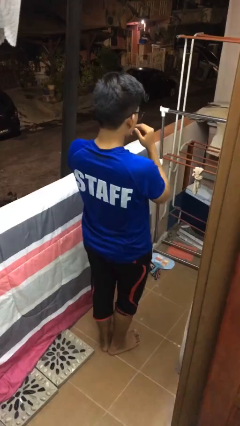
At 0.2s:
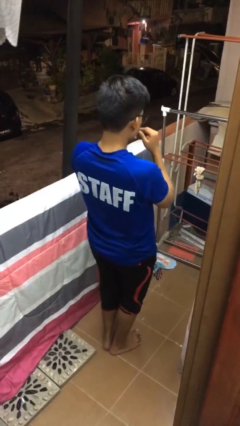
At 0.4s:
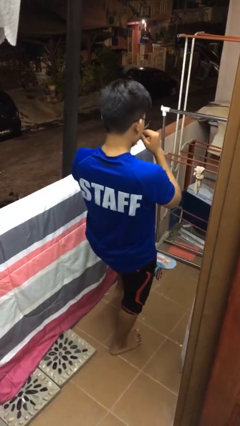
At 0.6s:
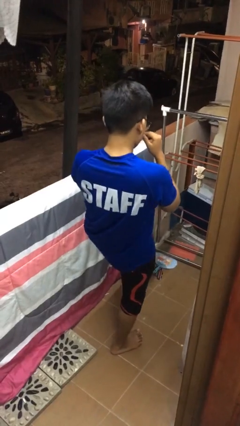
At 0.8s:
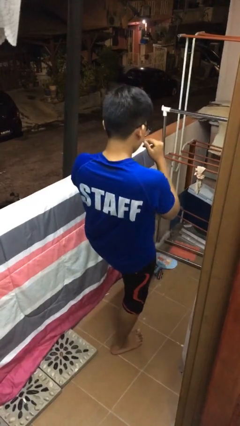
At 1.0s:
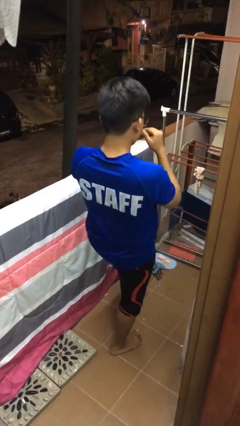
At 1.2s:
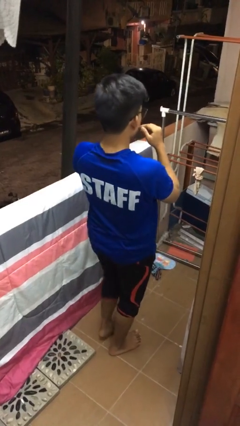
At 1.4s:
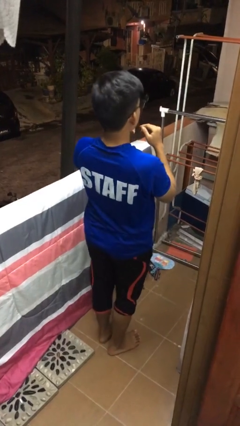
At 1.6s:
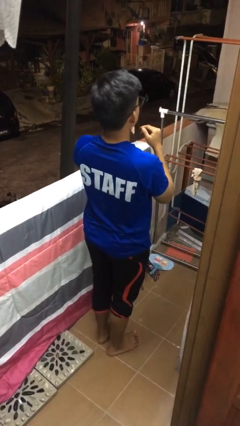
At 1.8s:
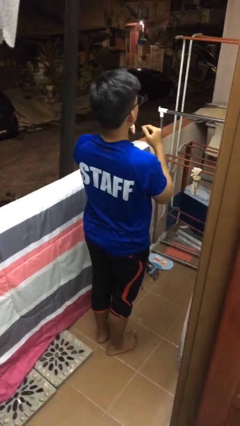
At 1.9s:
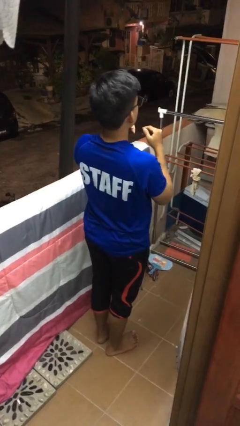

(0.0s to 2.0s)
person karate kicks

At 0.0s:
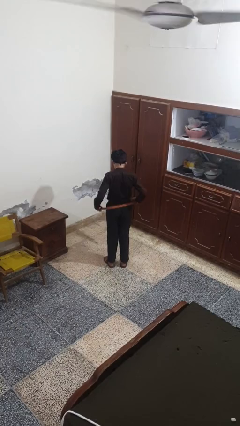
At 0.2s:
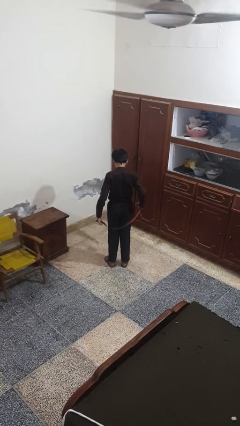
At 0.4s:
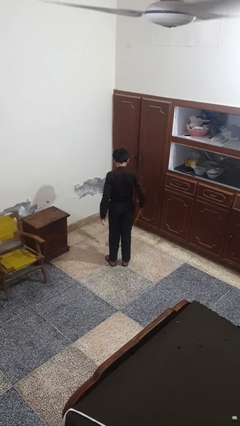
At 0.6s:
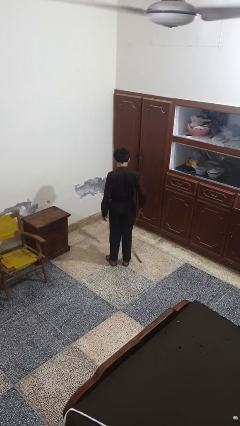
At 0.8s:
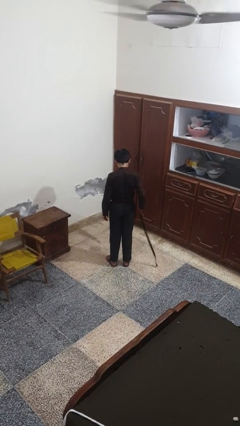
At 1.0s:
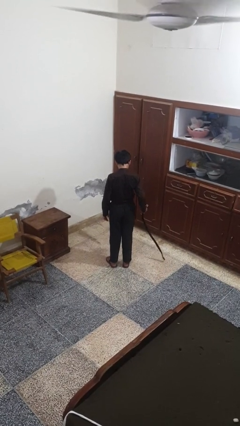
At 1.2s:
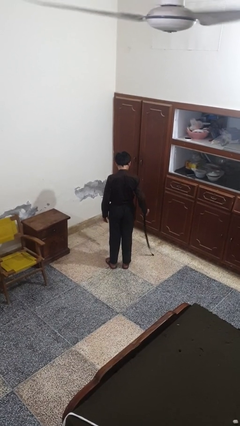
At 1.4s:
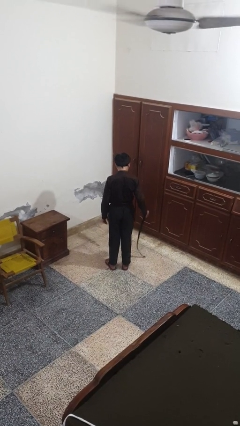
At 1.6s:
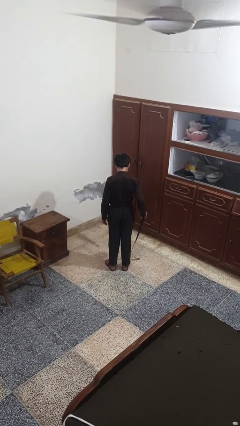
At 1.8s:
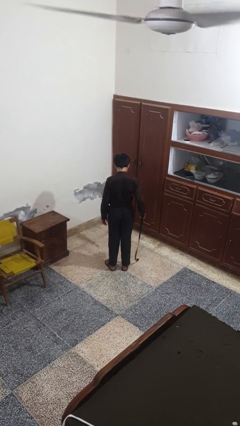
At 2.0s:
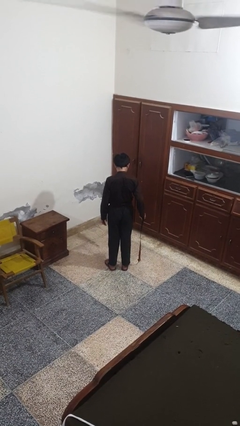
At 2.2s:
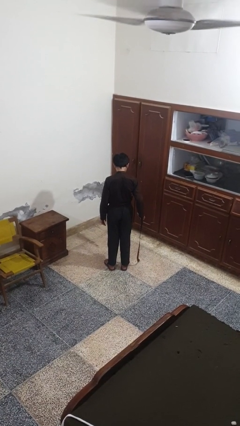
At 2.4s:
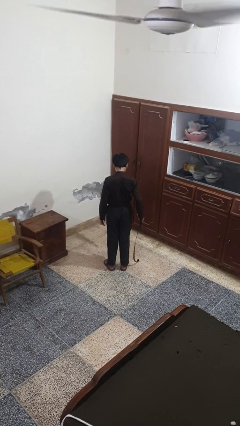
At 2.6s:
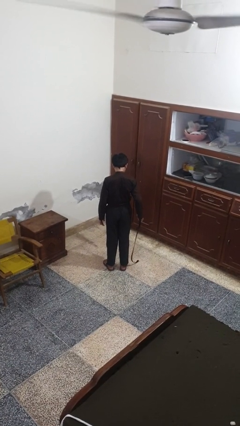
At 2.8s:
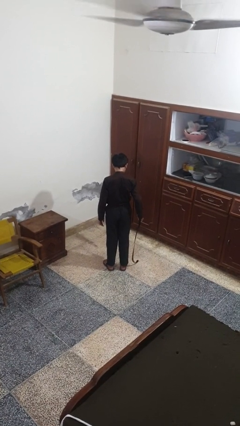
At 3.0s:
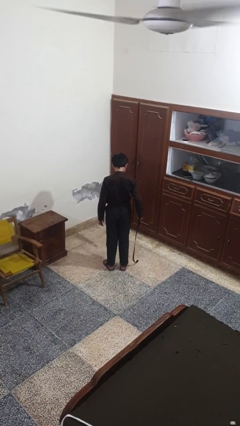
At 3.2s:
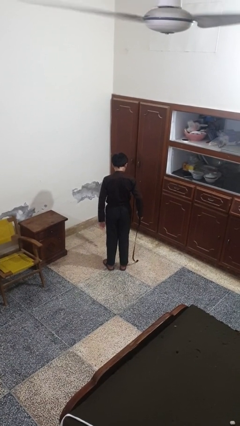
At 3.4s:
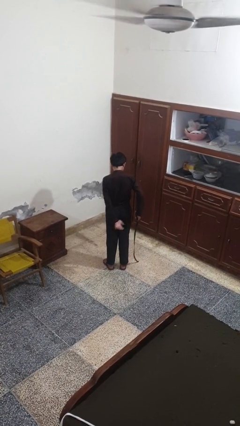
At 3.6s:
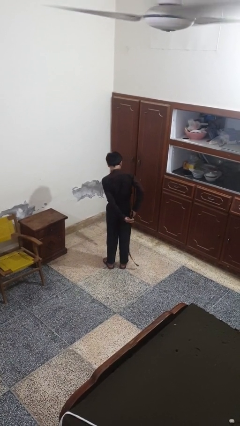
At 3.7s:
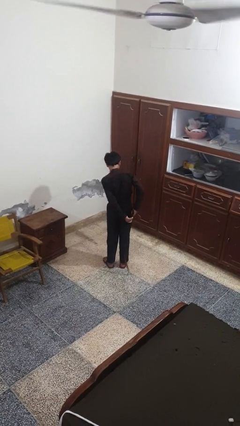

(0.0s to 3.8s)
person takes off belt

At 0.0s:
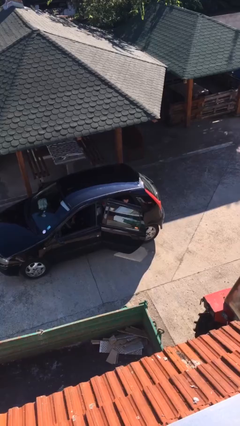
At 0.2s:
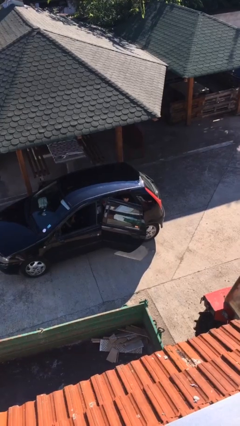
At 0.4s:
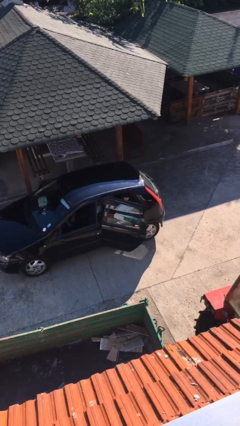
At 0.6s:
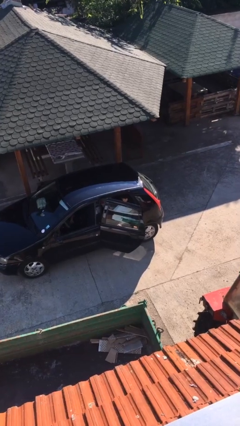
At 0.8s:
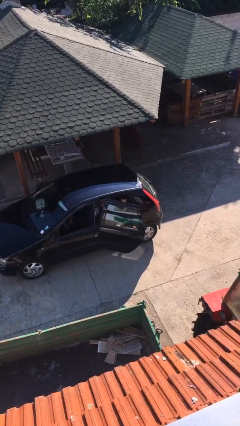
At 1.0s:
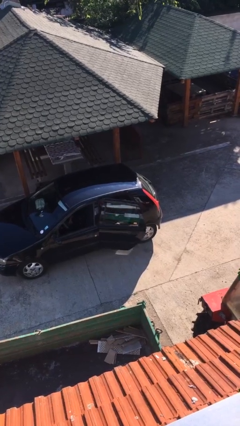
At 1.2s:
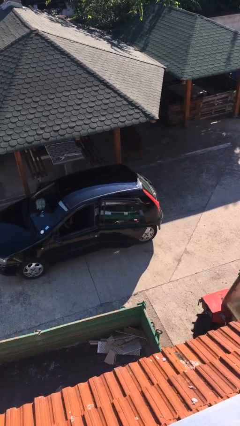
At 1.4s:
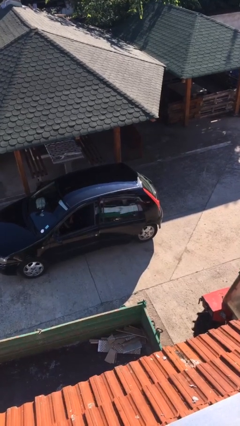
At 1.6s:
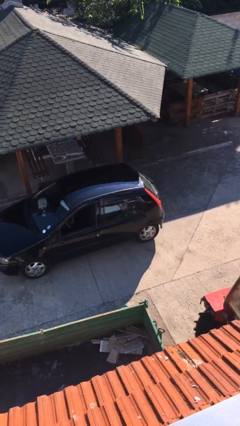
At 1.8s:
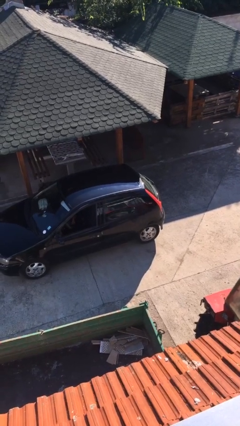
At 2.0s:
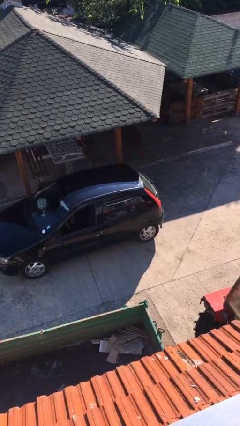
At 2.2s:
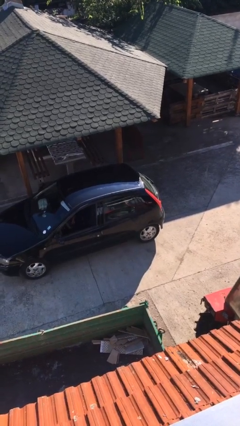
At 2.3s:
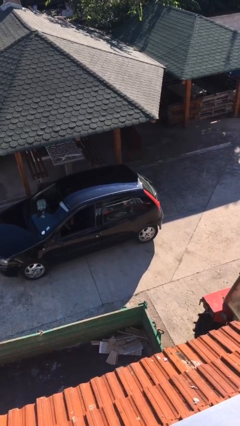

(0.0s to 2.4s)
person closes car door

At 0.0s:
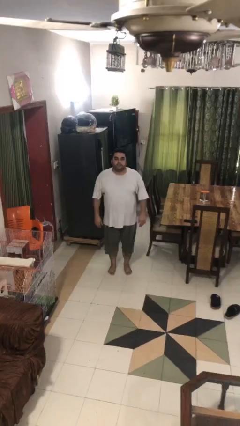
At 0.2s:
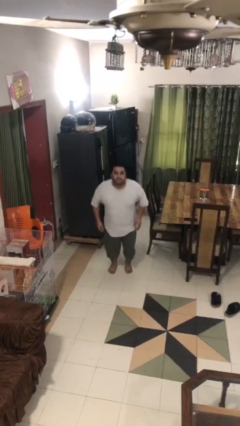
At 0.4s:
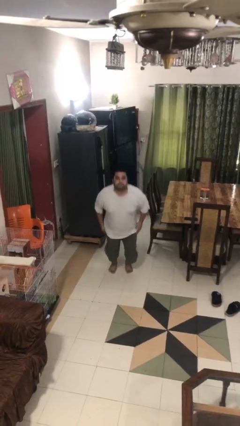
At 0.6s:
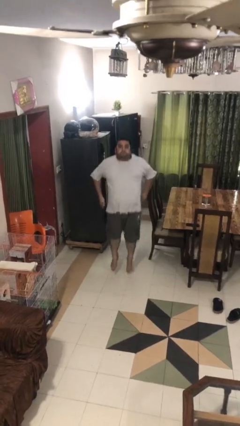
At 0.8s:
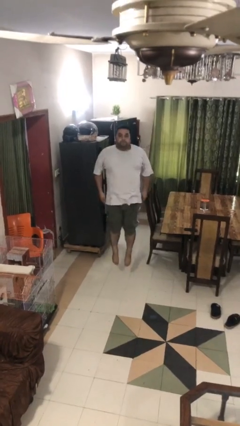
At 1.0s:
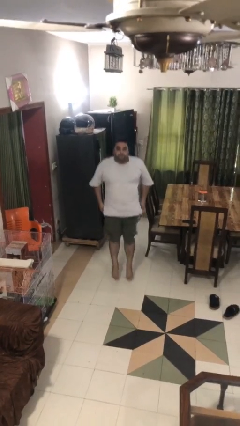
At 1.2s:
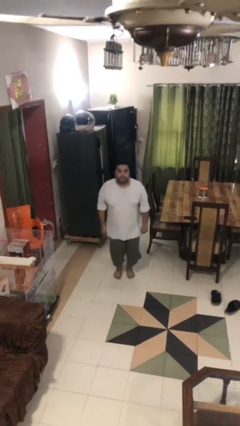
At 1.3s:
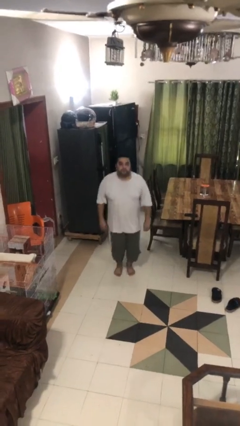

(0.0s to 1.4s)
person jumps

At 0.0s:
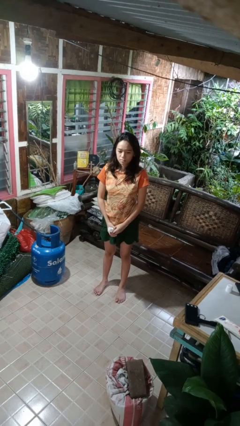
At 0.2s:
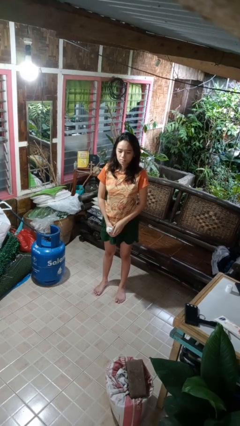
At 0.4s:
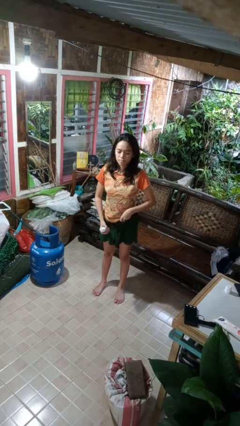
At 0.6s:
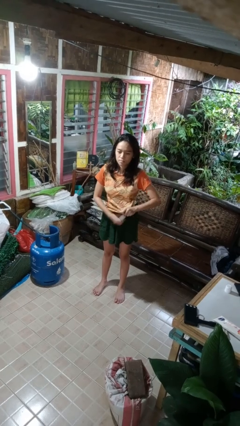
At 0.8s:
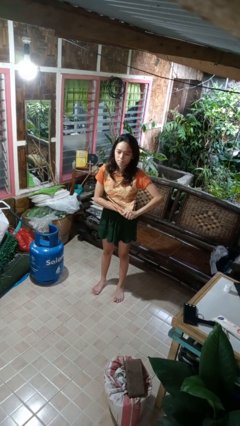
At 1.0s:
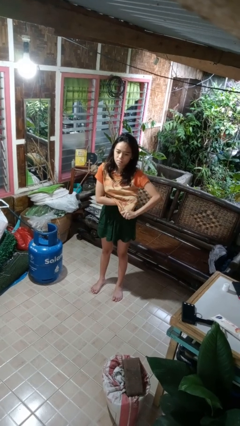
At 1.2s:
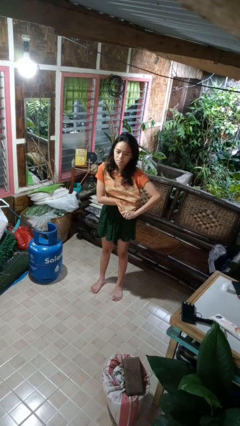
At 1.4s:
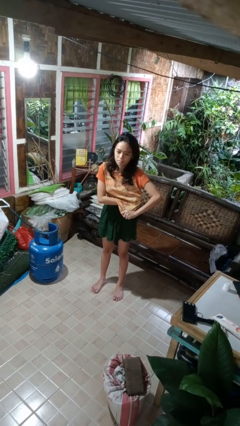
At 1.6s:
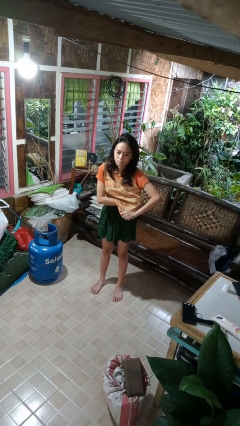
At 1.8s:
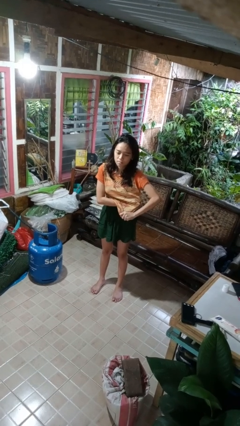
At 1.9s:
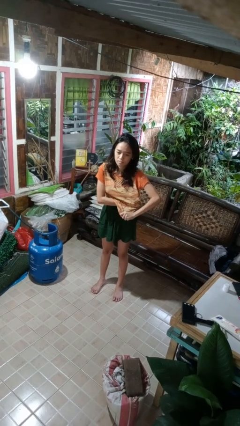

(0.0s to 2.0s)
person applies deodorant

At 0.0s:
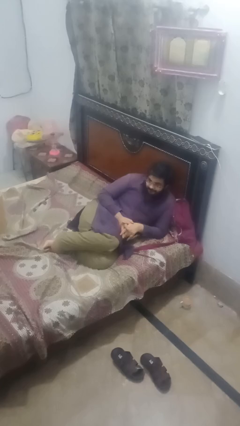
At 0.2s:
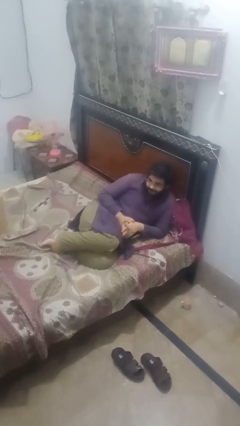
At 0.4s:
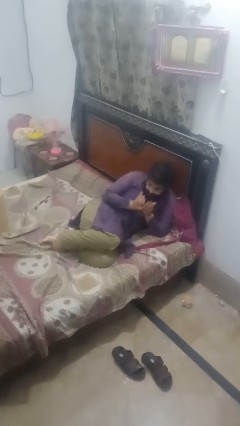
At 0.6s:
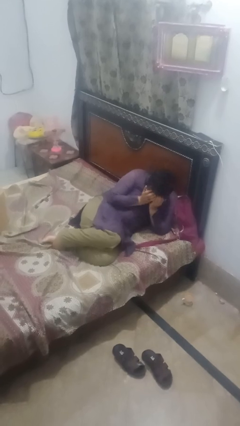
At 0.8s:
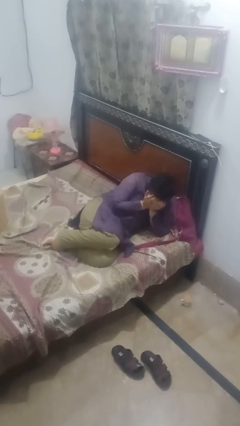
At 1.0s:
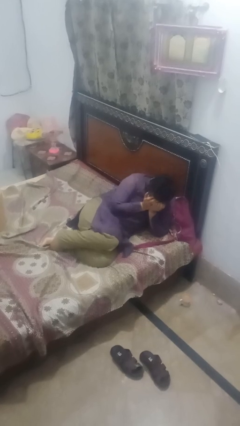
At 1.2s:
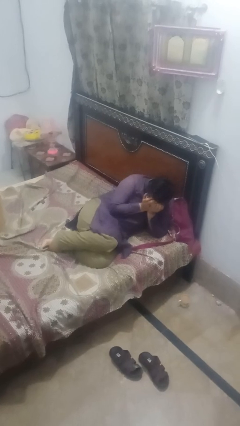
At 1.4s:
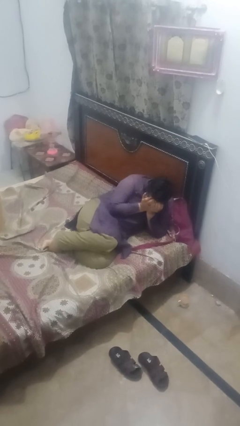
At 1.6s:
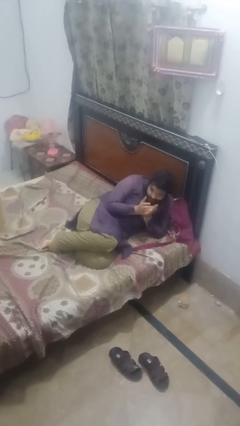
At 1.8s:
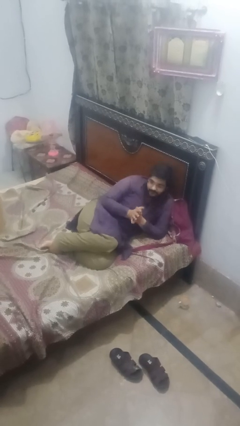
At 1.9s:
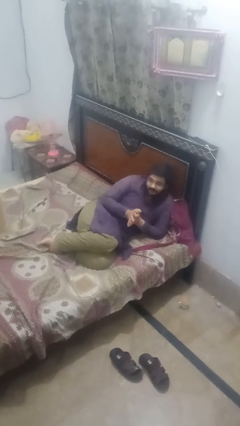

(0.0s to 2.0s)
person covers face with hands

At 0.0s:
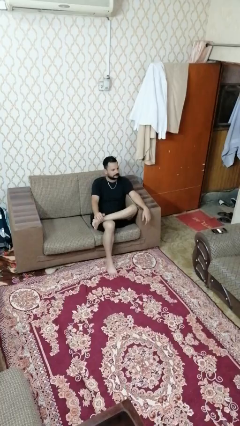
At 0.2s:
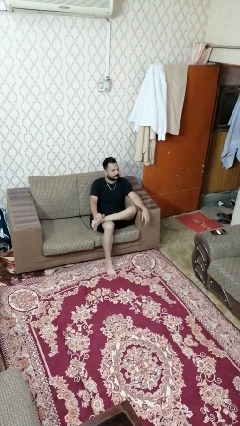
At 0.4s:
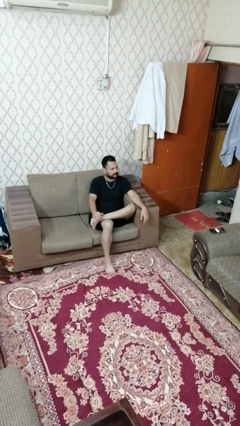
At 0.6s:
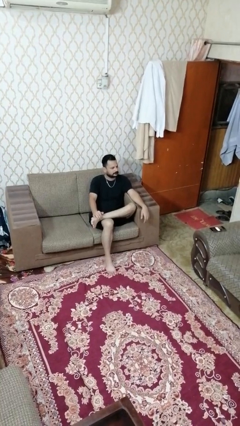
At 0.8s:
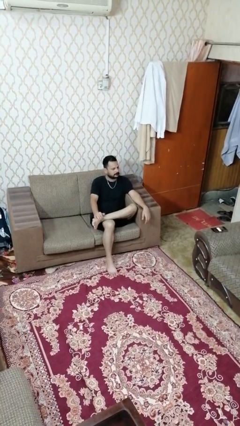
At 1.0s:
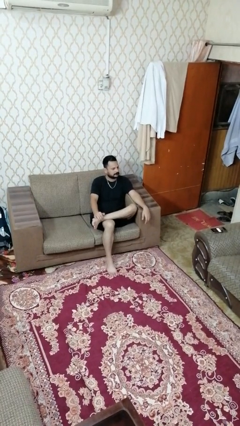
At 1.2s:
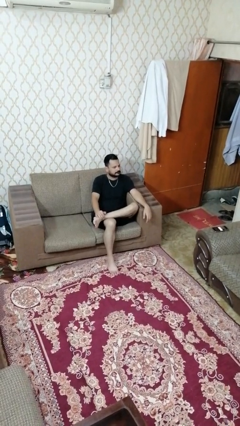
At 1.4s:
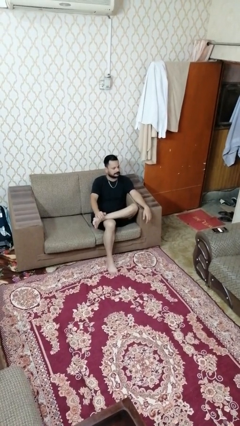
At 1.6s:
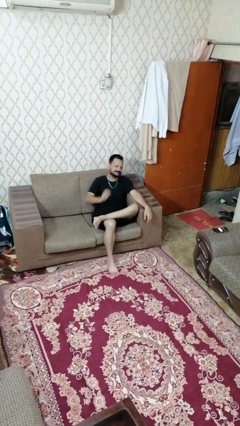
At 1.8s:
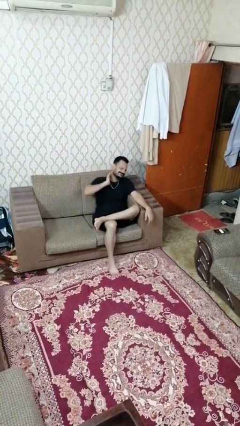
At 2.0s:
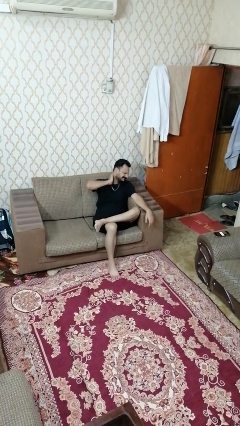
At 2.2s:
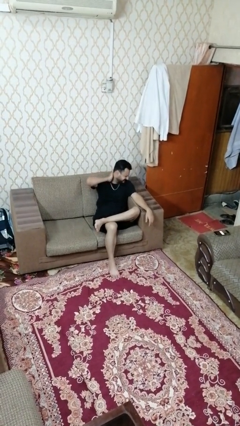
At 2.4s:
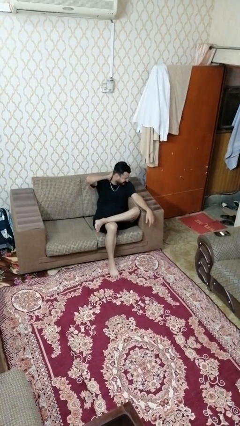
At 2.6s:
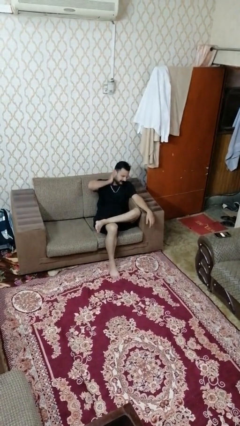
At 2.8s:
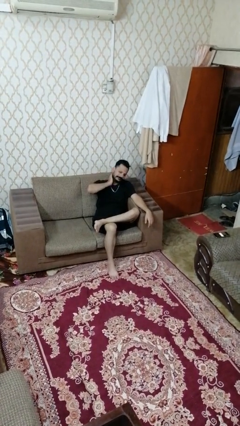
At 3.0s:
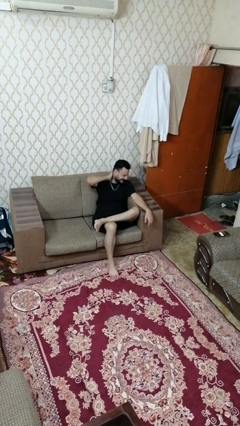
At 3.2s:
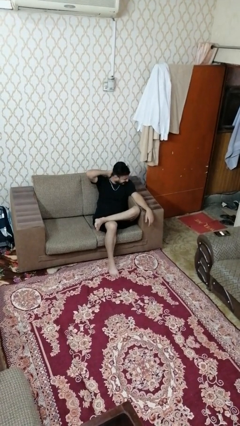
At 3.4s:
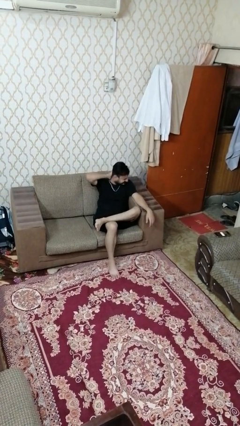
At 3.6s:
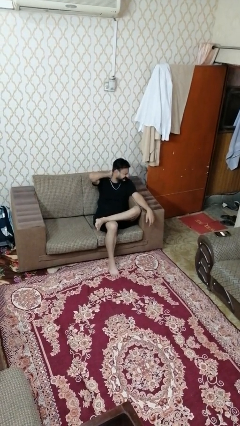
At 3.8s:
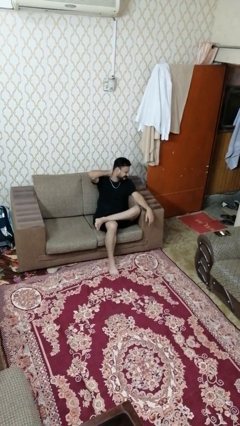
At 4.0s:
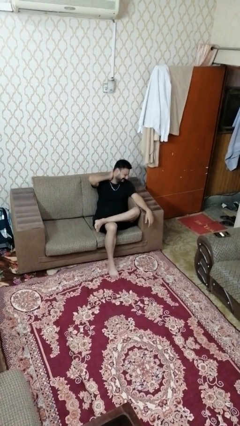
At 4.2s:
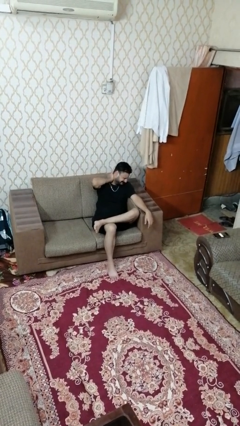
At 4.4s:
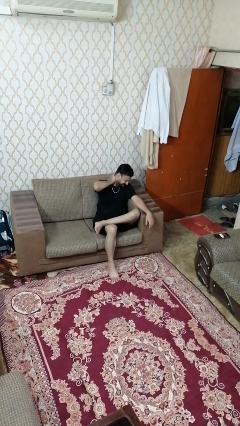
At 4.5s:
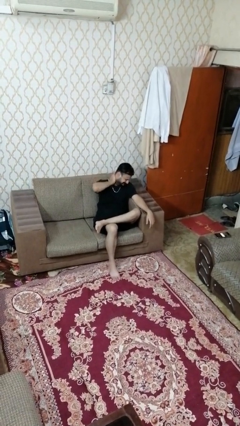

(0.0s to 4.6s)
person rubs neck
